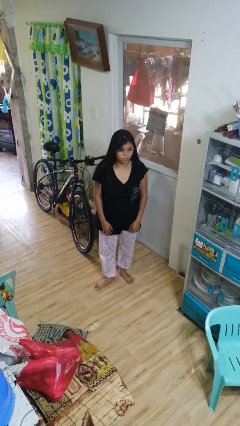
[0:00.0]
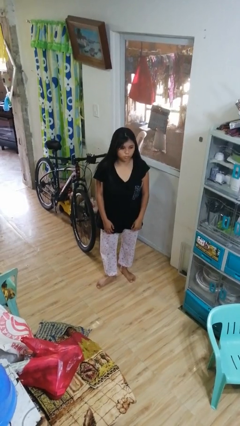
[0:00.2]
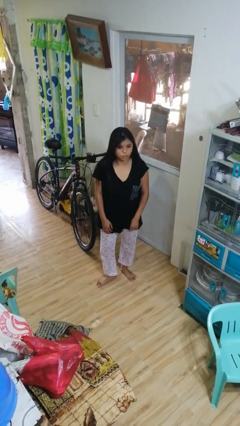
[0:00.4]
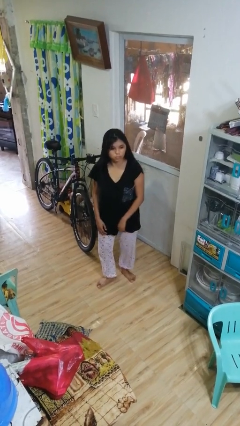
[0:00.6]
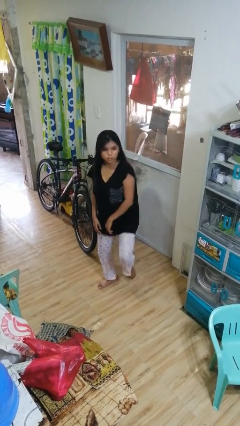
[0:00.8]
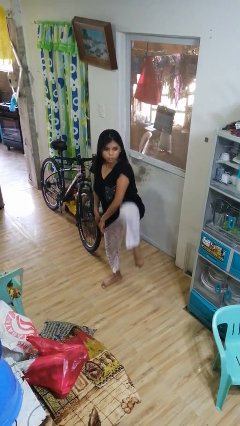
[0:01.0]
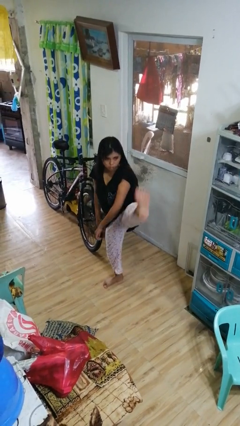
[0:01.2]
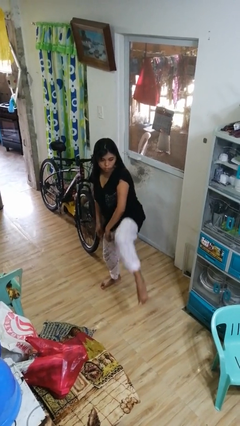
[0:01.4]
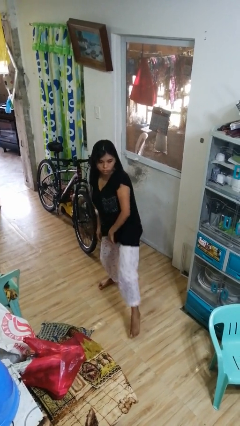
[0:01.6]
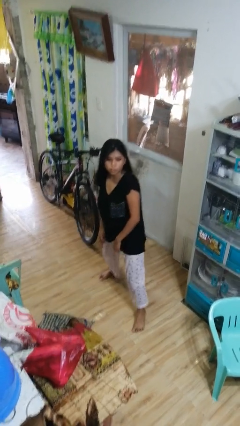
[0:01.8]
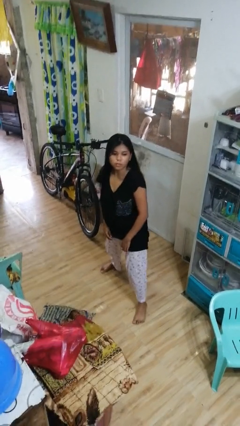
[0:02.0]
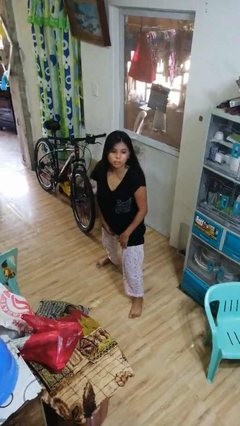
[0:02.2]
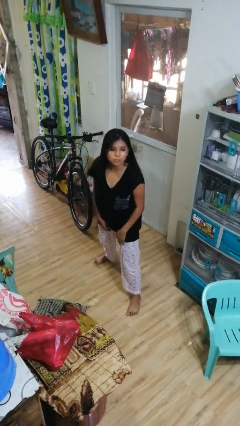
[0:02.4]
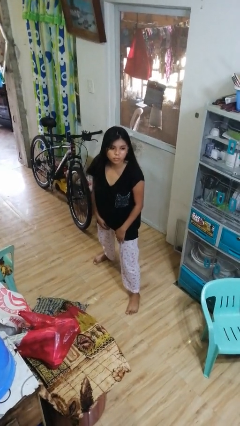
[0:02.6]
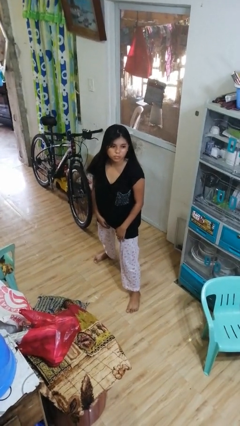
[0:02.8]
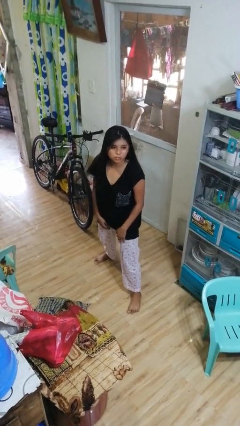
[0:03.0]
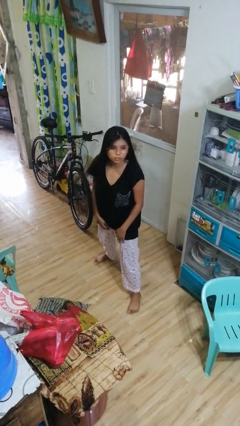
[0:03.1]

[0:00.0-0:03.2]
person karate kicks

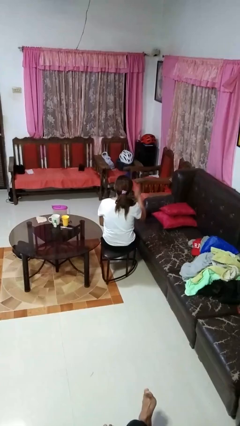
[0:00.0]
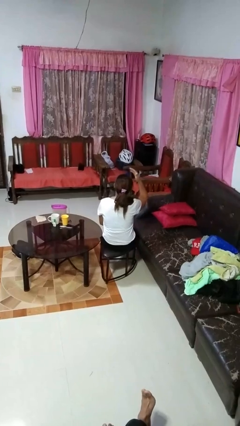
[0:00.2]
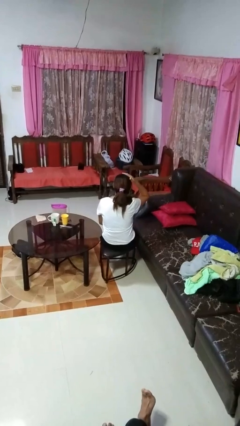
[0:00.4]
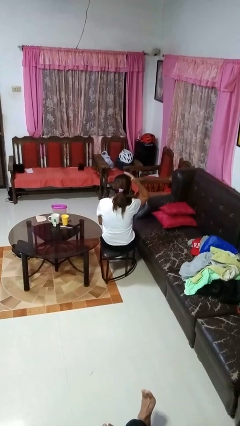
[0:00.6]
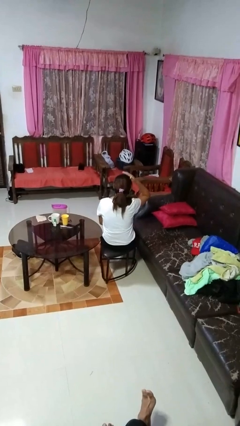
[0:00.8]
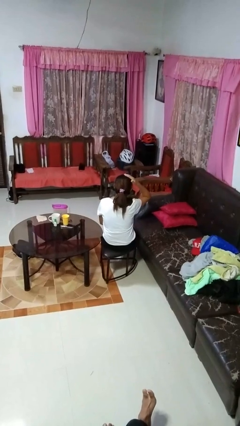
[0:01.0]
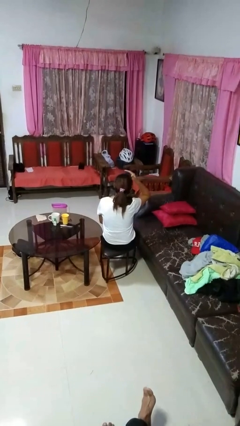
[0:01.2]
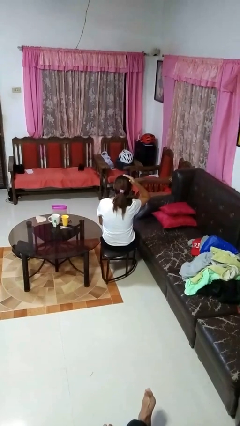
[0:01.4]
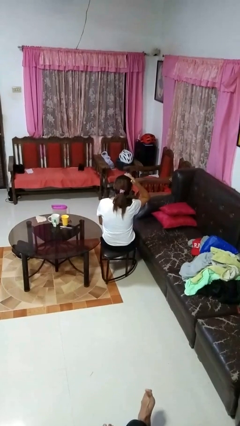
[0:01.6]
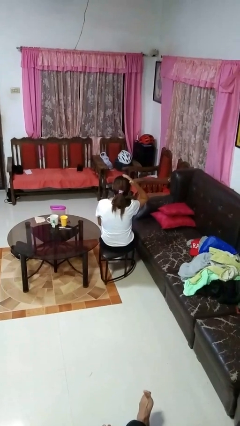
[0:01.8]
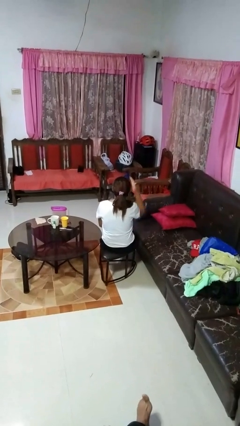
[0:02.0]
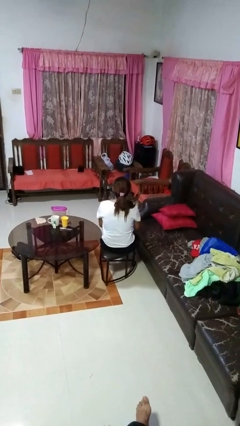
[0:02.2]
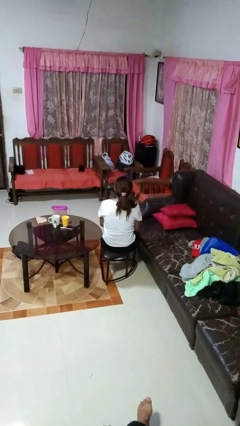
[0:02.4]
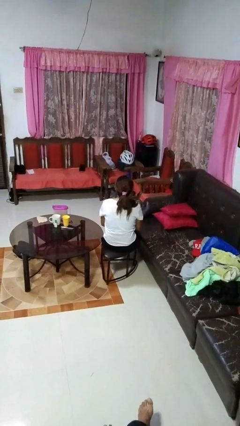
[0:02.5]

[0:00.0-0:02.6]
person pats head

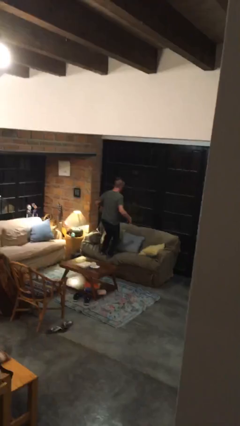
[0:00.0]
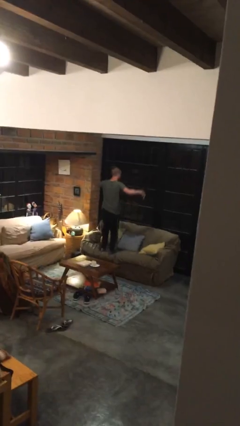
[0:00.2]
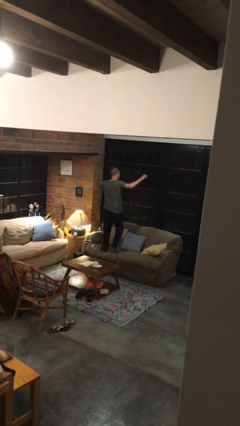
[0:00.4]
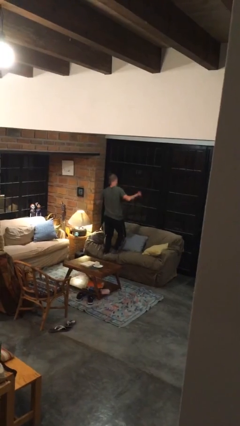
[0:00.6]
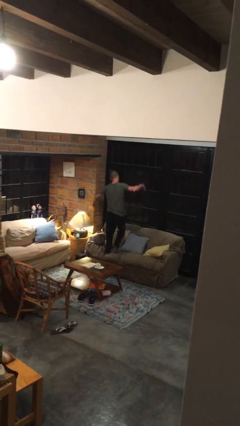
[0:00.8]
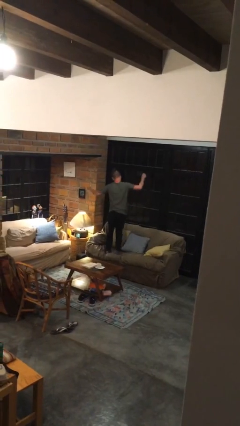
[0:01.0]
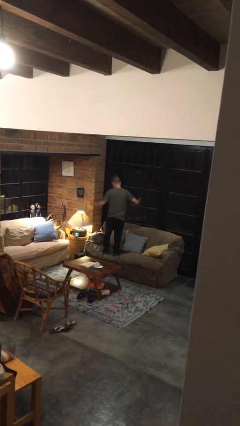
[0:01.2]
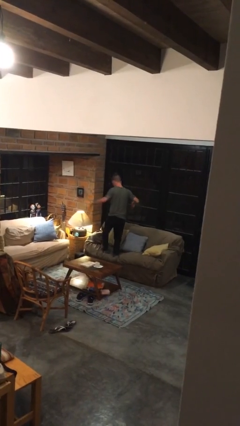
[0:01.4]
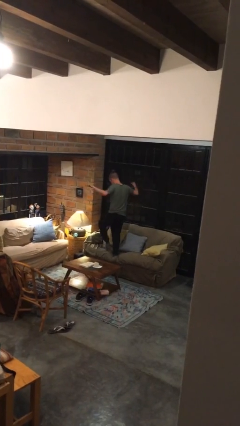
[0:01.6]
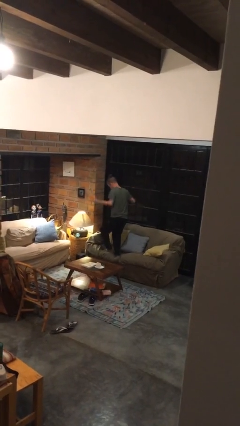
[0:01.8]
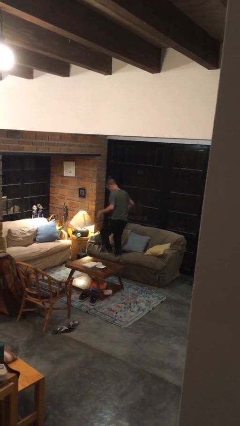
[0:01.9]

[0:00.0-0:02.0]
person jumps on couch

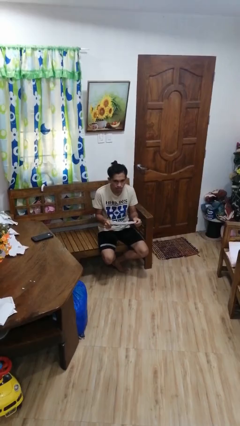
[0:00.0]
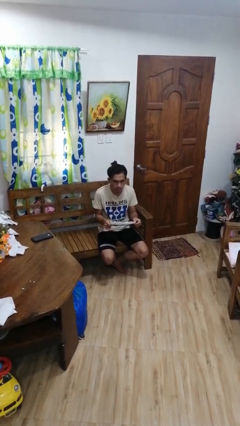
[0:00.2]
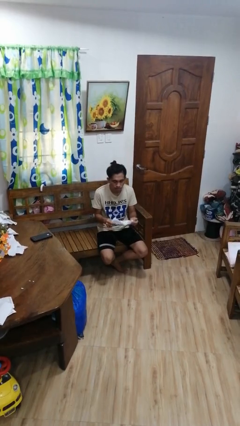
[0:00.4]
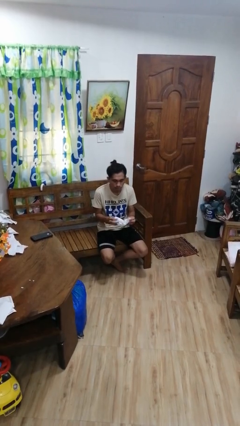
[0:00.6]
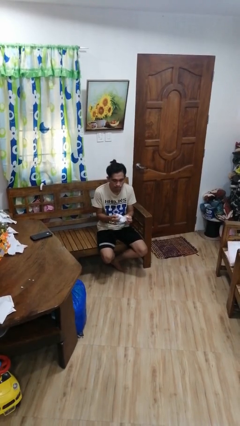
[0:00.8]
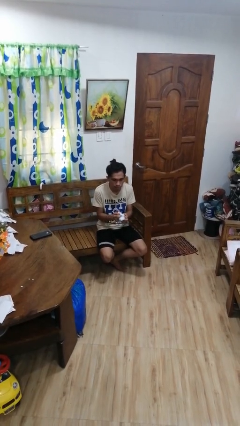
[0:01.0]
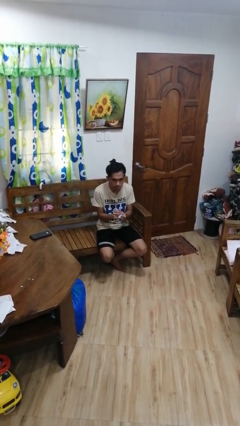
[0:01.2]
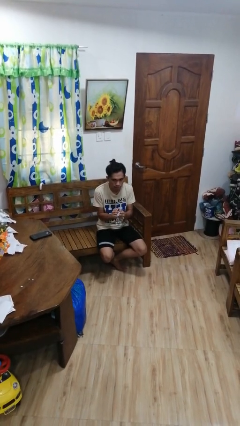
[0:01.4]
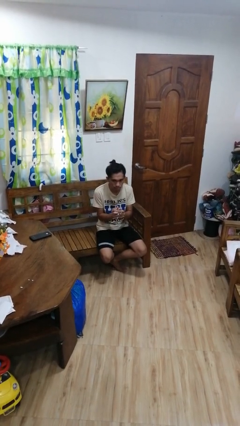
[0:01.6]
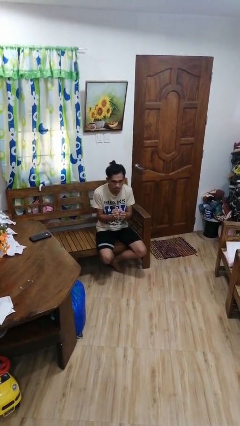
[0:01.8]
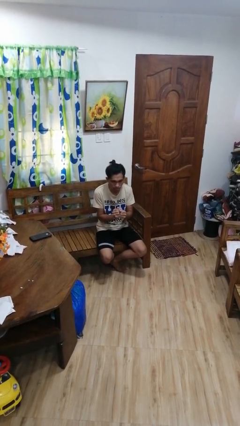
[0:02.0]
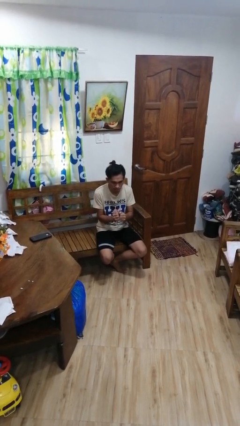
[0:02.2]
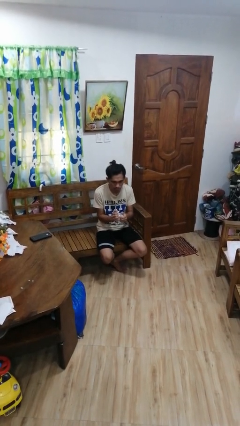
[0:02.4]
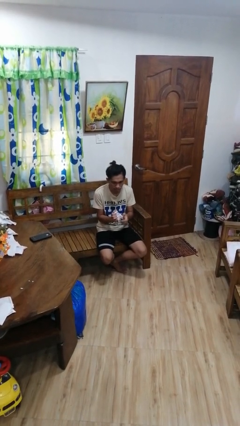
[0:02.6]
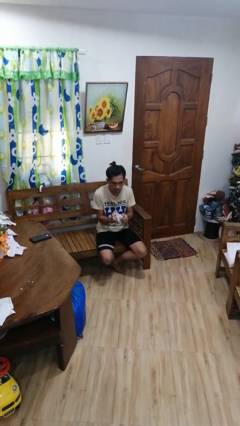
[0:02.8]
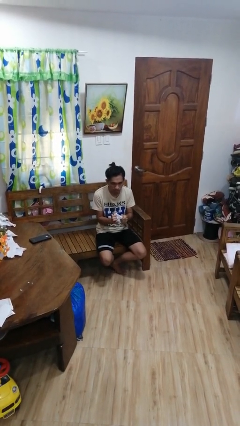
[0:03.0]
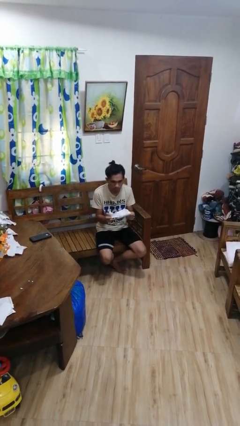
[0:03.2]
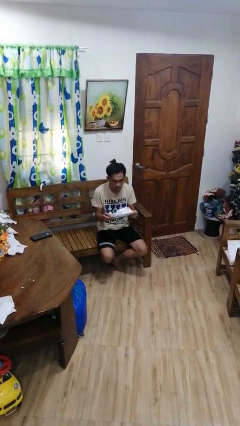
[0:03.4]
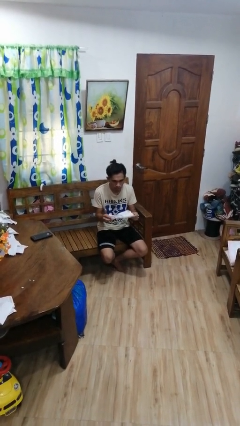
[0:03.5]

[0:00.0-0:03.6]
person crumples paper

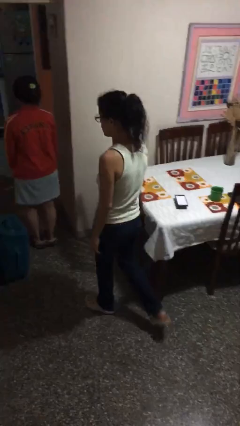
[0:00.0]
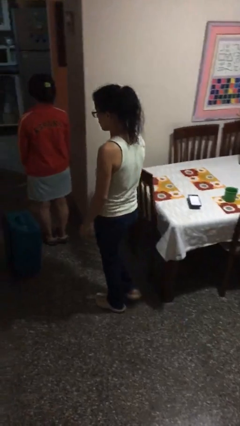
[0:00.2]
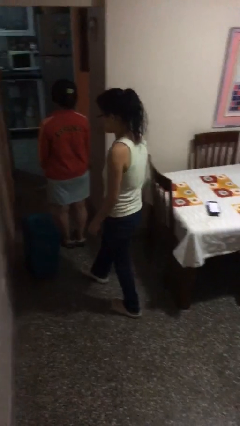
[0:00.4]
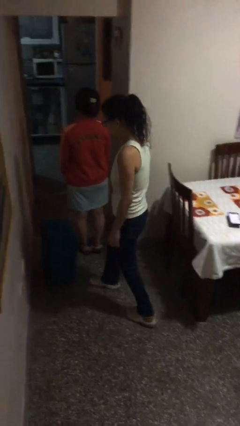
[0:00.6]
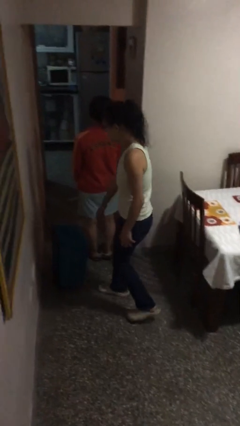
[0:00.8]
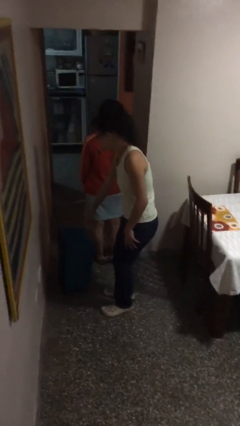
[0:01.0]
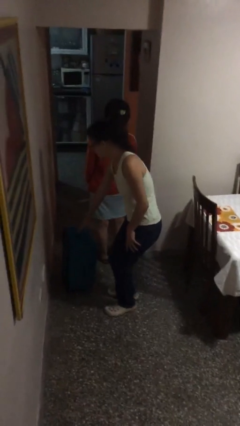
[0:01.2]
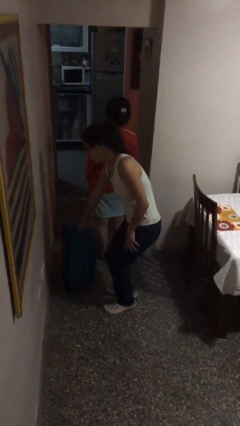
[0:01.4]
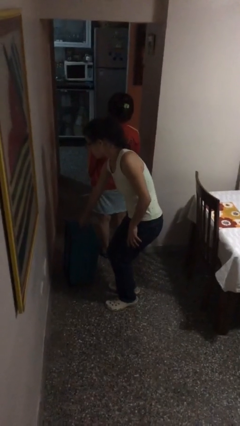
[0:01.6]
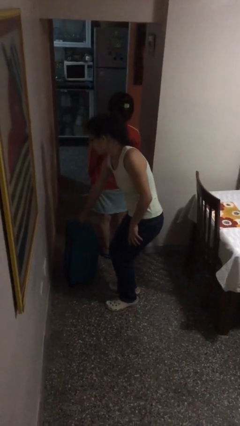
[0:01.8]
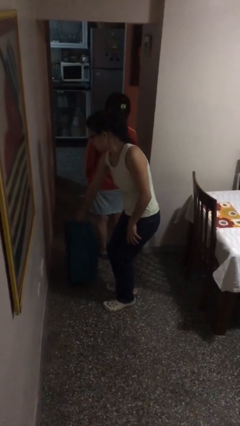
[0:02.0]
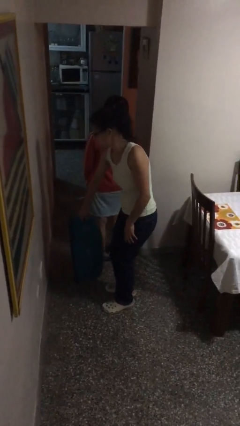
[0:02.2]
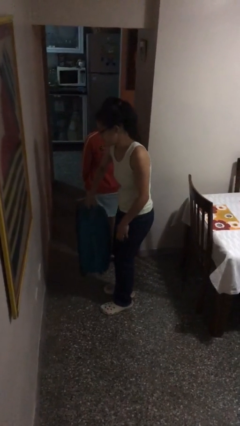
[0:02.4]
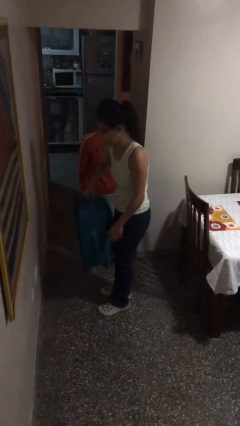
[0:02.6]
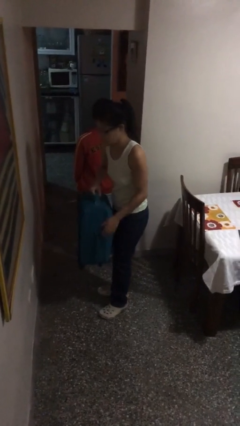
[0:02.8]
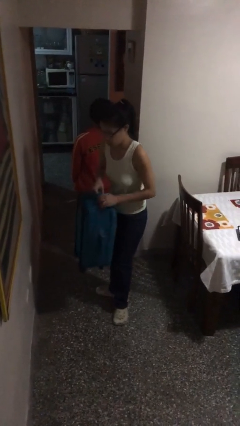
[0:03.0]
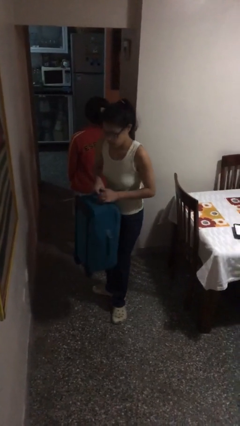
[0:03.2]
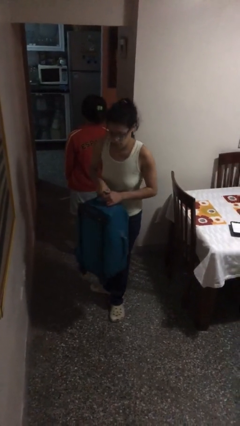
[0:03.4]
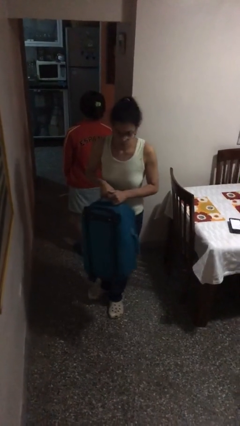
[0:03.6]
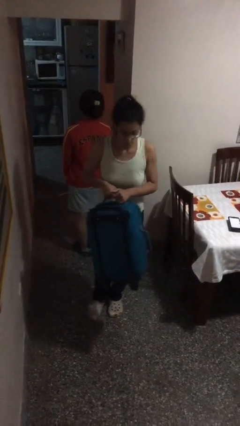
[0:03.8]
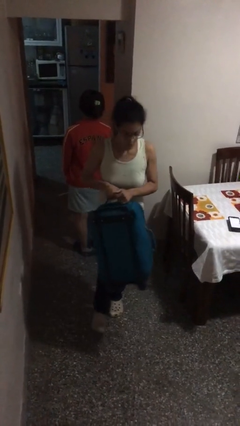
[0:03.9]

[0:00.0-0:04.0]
person steals object from person

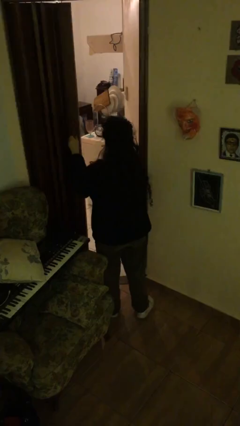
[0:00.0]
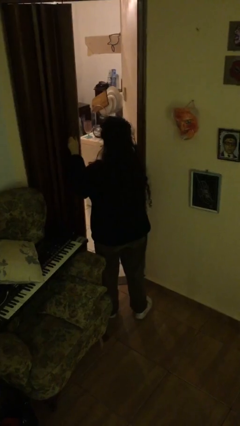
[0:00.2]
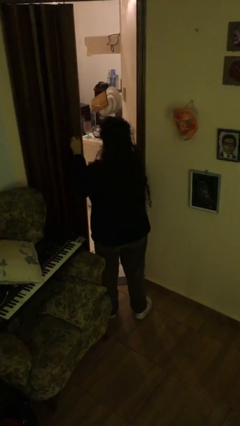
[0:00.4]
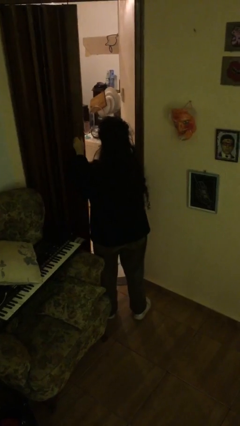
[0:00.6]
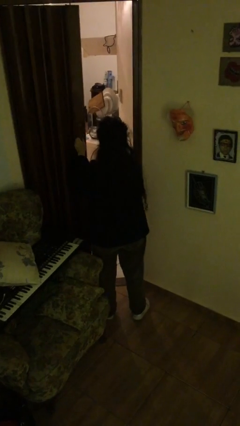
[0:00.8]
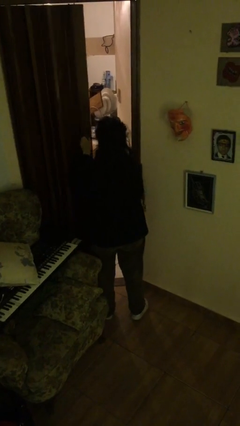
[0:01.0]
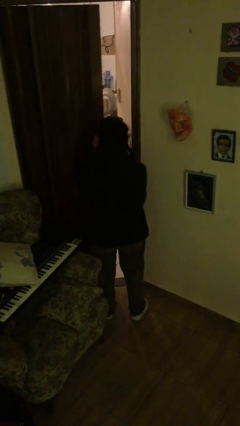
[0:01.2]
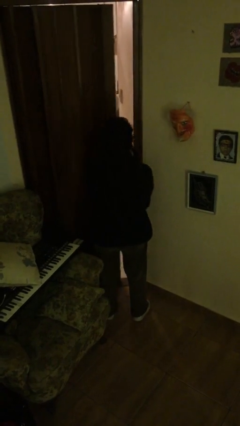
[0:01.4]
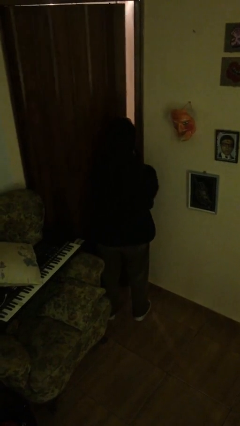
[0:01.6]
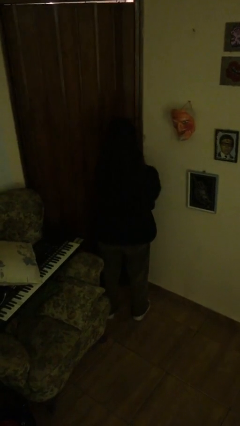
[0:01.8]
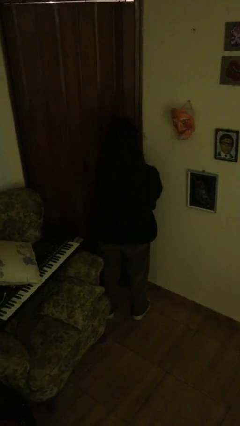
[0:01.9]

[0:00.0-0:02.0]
person closes sliding door
